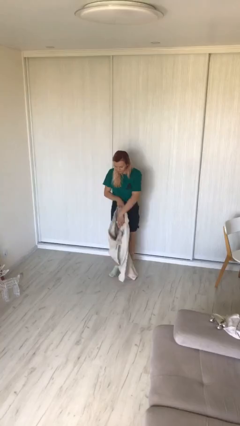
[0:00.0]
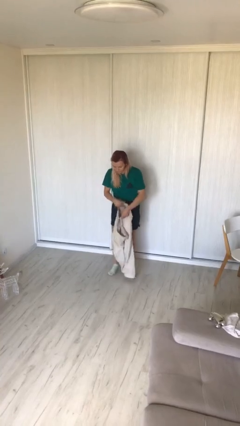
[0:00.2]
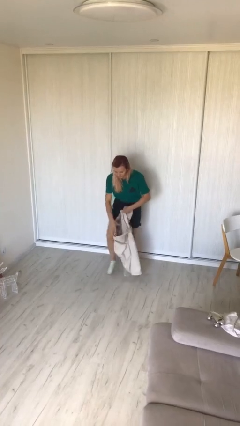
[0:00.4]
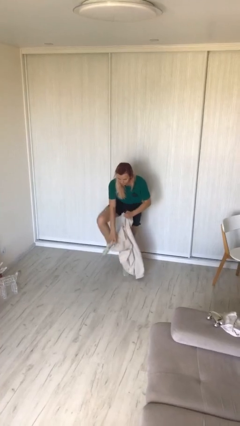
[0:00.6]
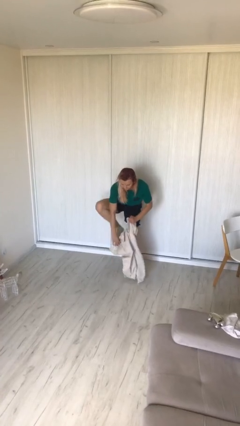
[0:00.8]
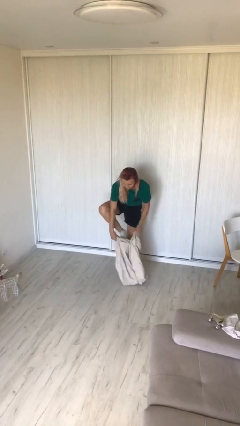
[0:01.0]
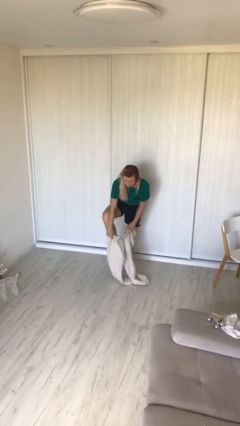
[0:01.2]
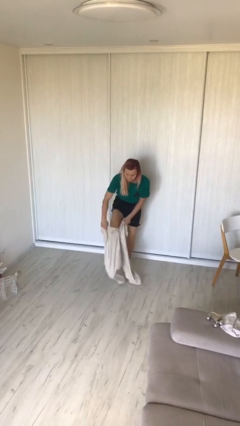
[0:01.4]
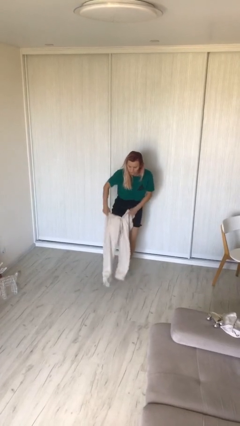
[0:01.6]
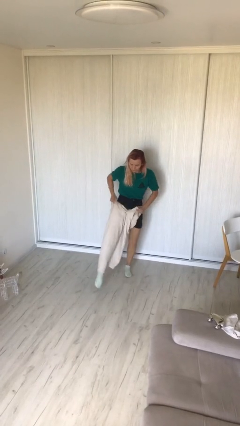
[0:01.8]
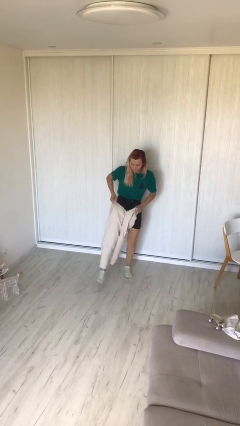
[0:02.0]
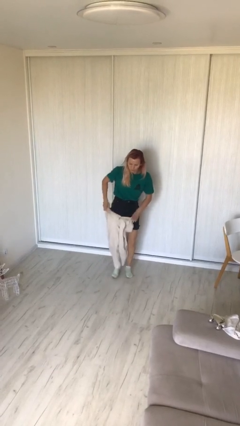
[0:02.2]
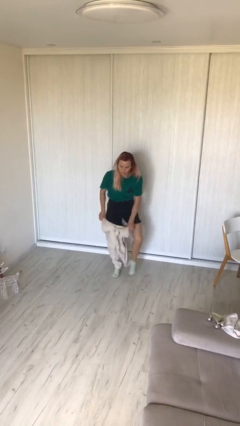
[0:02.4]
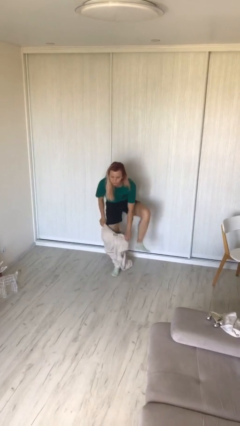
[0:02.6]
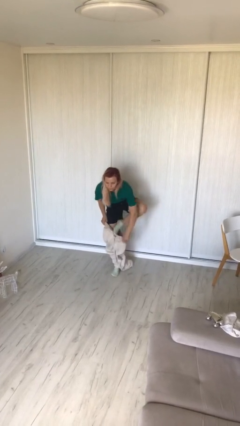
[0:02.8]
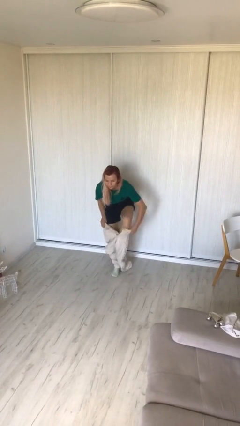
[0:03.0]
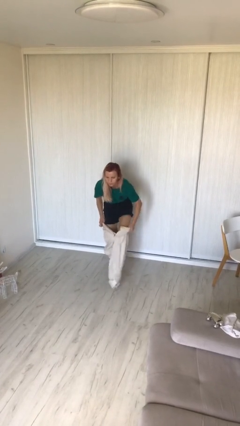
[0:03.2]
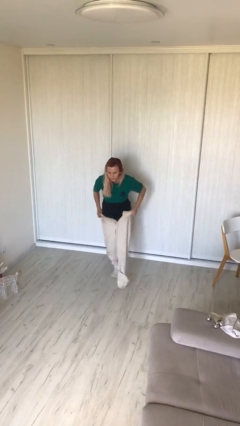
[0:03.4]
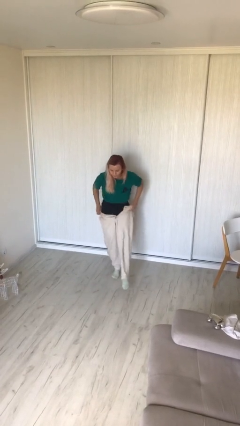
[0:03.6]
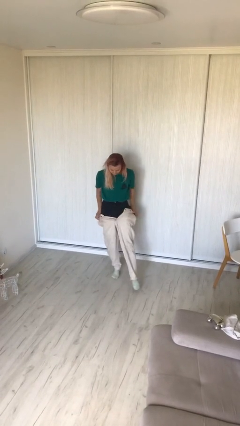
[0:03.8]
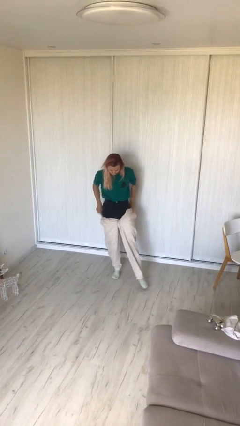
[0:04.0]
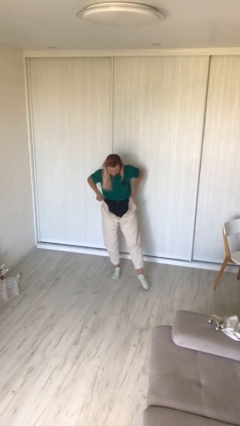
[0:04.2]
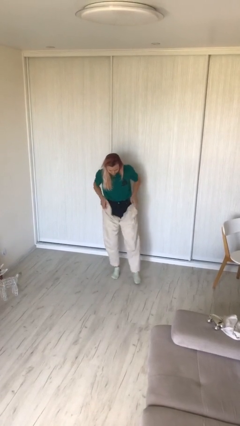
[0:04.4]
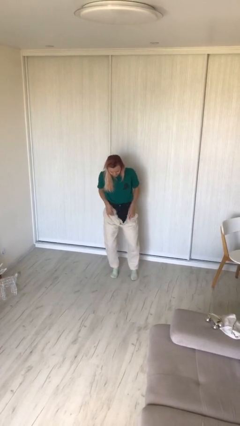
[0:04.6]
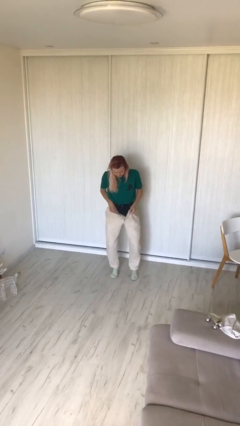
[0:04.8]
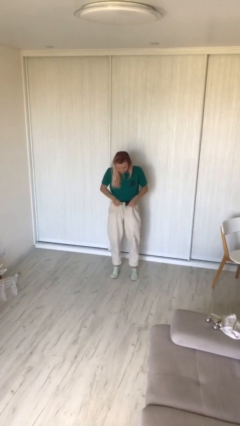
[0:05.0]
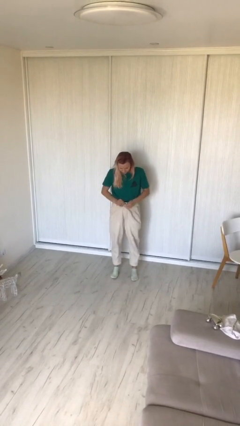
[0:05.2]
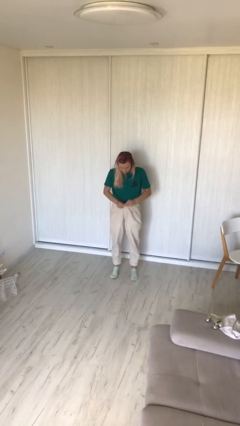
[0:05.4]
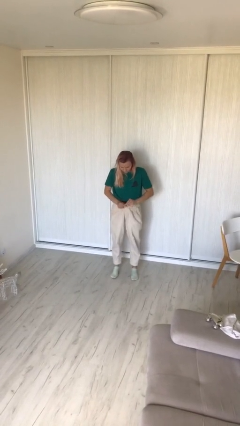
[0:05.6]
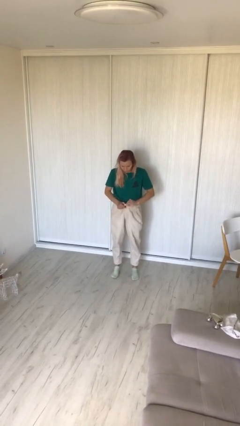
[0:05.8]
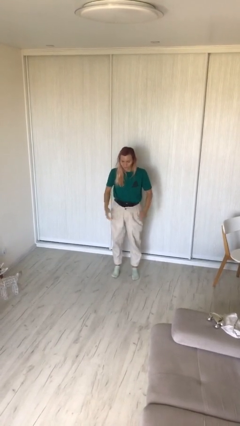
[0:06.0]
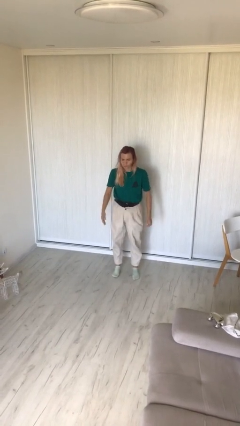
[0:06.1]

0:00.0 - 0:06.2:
person puts on pants

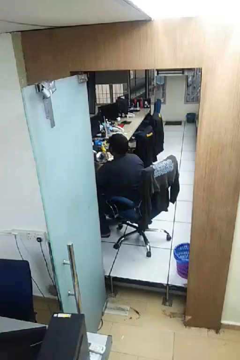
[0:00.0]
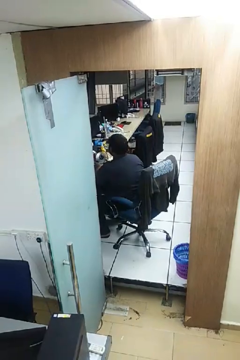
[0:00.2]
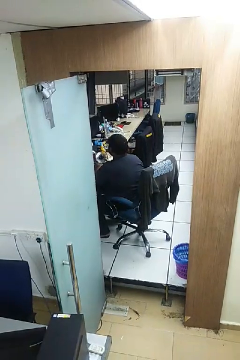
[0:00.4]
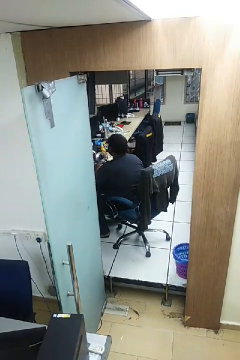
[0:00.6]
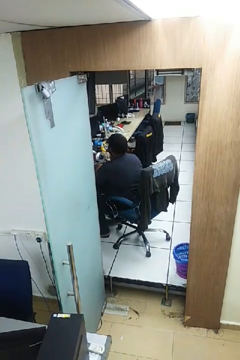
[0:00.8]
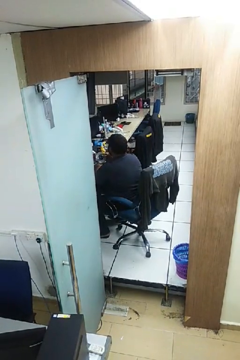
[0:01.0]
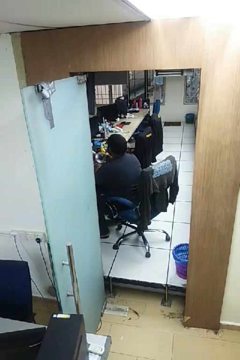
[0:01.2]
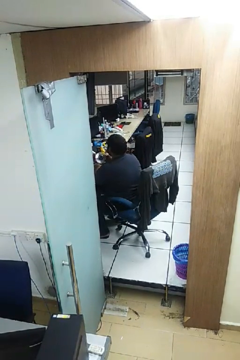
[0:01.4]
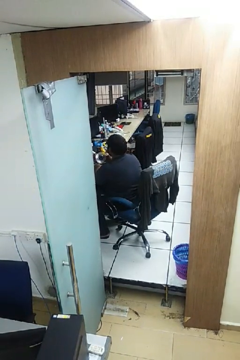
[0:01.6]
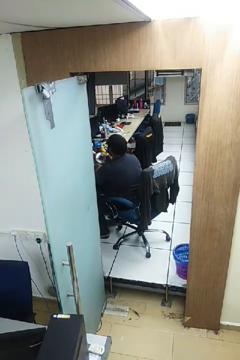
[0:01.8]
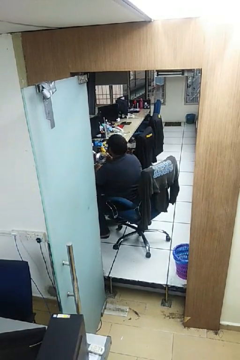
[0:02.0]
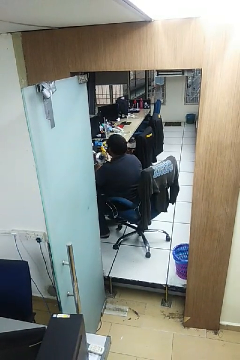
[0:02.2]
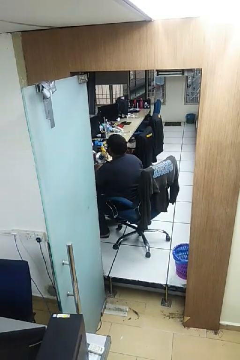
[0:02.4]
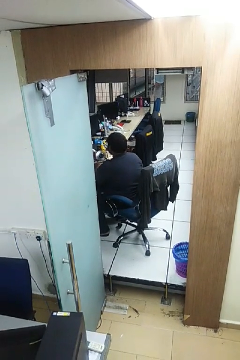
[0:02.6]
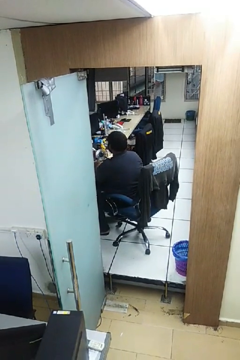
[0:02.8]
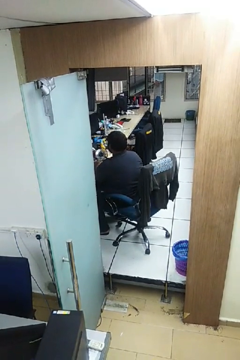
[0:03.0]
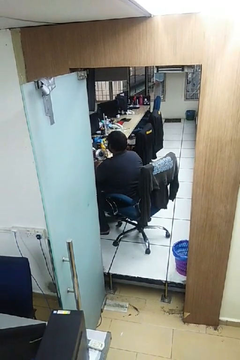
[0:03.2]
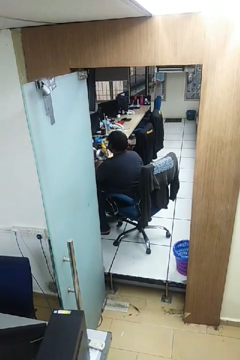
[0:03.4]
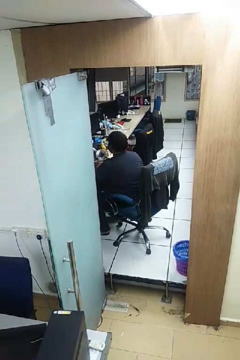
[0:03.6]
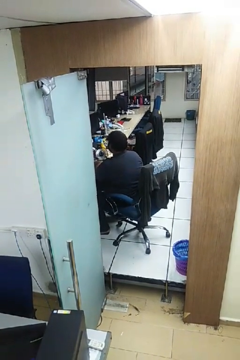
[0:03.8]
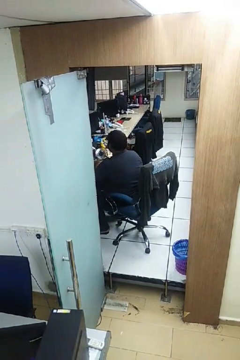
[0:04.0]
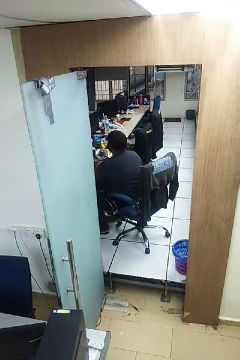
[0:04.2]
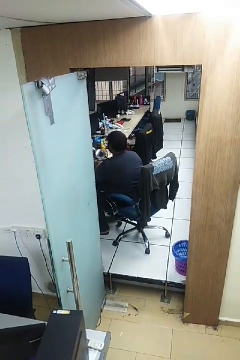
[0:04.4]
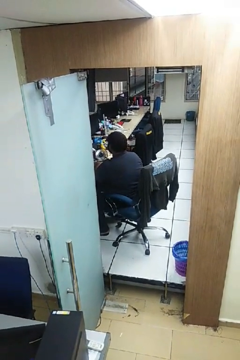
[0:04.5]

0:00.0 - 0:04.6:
person turns on fan

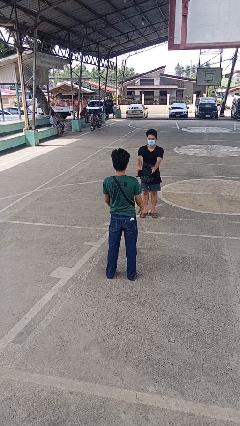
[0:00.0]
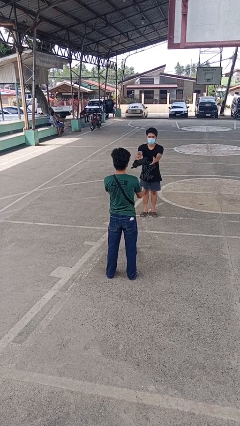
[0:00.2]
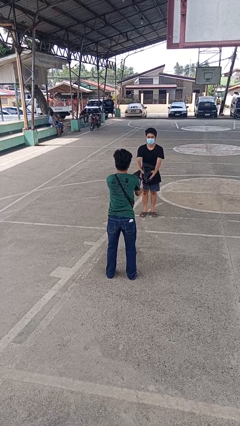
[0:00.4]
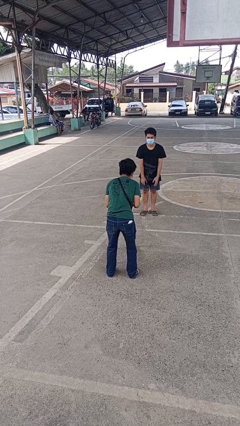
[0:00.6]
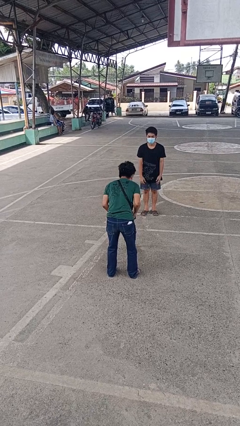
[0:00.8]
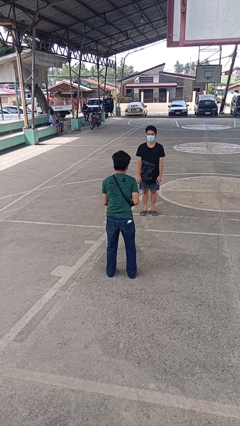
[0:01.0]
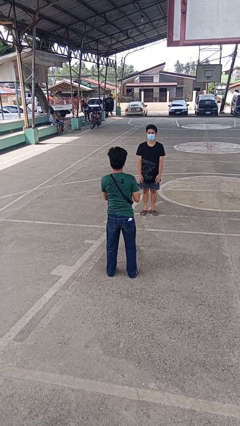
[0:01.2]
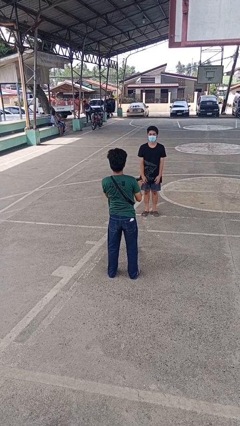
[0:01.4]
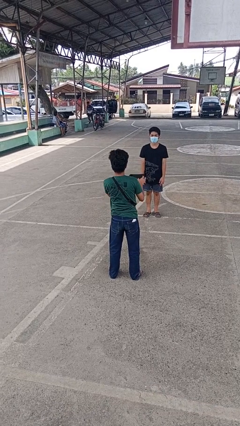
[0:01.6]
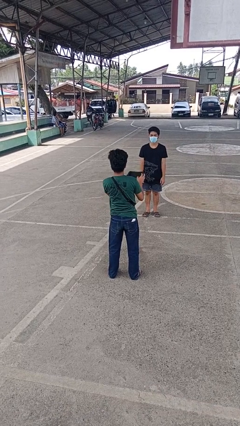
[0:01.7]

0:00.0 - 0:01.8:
person catches object from person

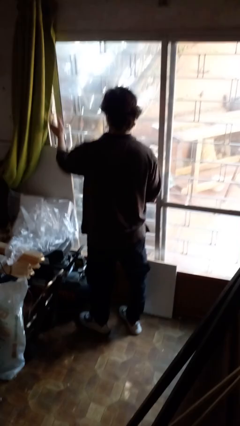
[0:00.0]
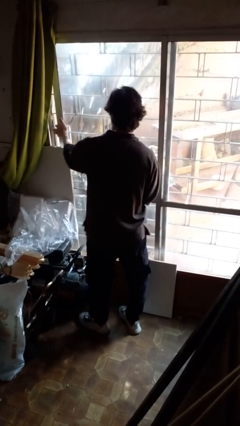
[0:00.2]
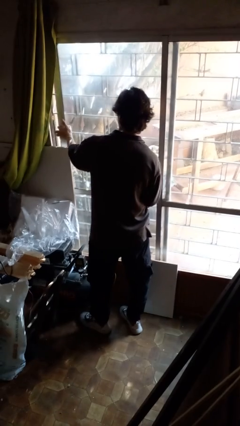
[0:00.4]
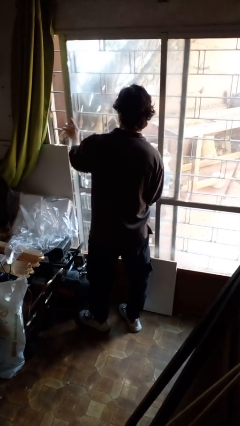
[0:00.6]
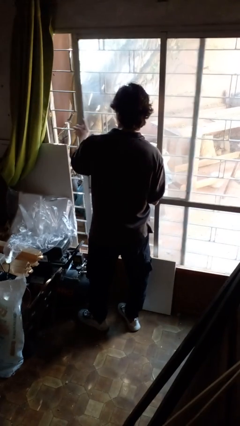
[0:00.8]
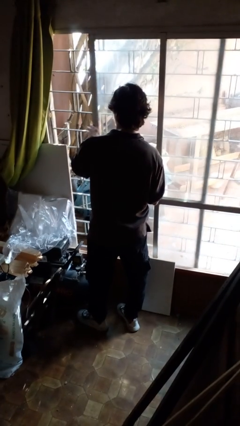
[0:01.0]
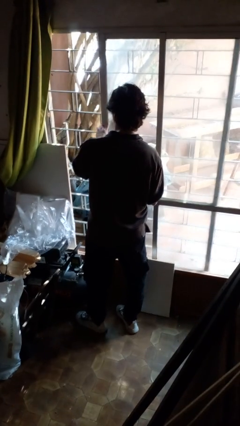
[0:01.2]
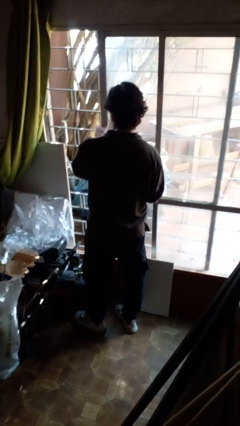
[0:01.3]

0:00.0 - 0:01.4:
person opens sliding door

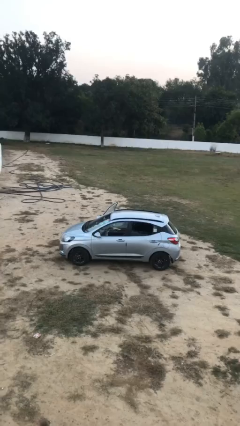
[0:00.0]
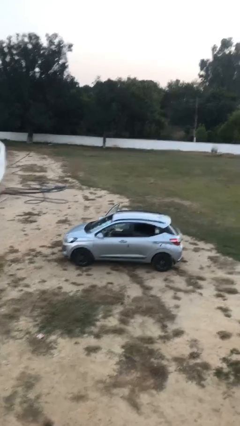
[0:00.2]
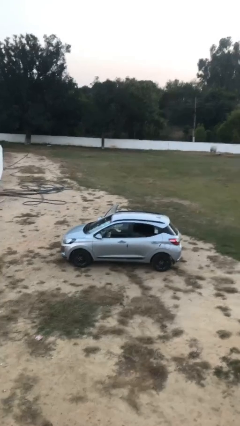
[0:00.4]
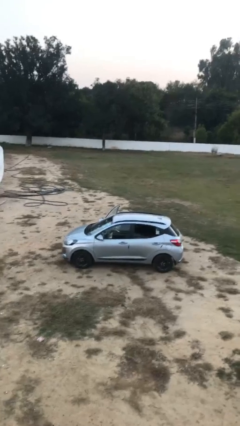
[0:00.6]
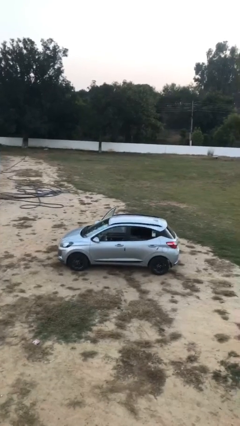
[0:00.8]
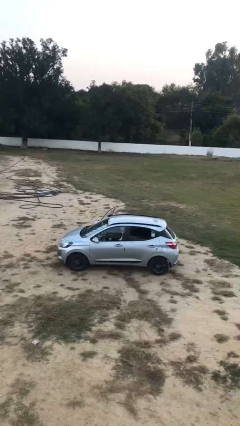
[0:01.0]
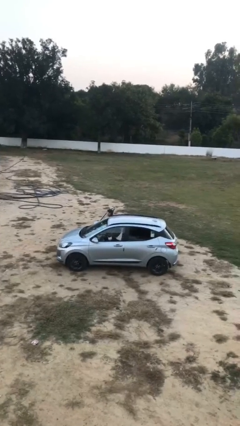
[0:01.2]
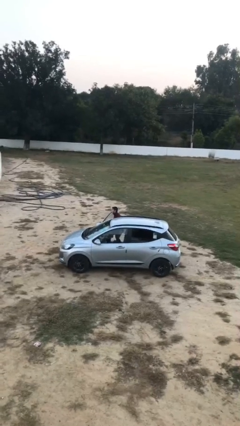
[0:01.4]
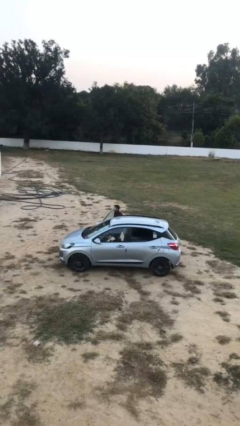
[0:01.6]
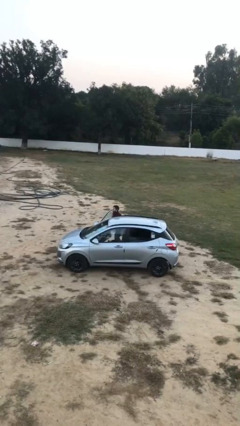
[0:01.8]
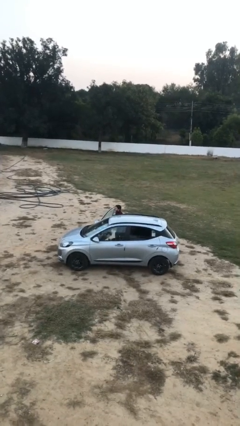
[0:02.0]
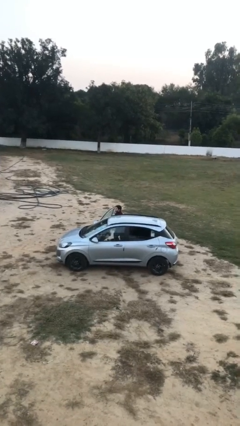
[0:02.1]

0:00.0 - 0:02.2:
person exits car

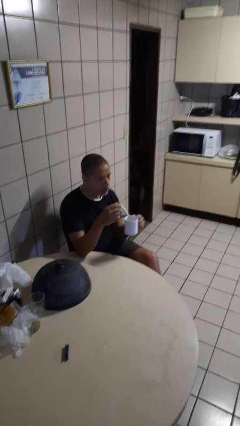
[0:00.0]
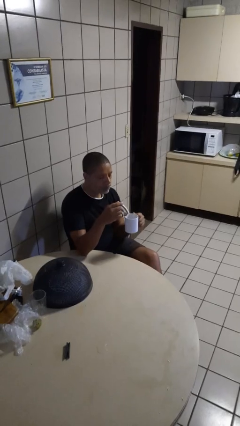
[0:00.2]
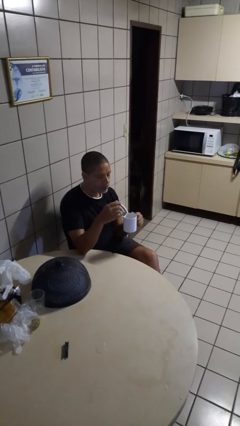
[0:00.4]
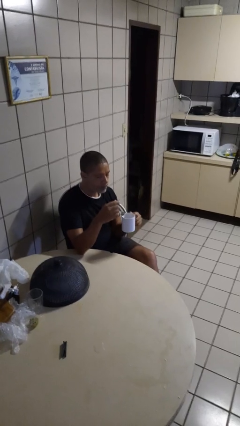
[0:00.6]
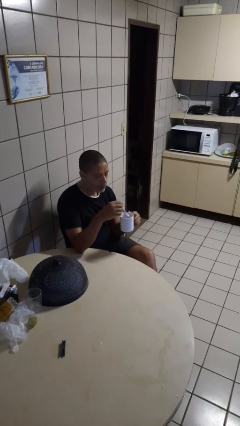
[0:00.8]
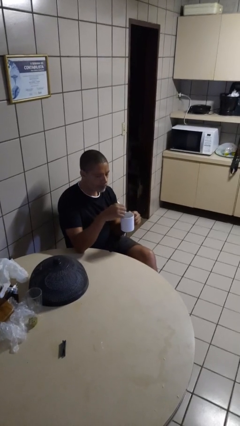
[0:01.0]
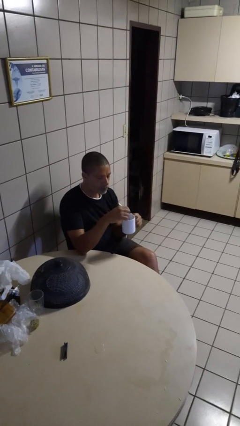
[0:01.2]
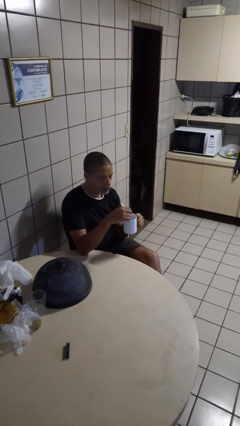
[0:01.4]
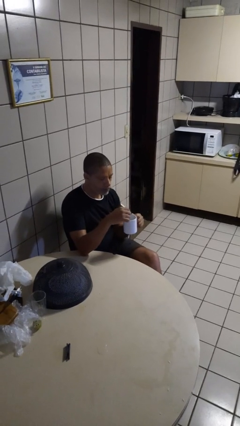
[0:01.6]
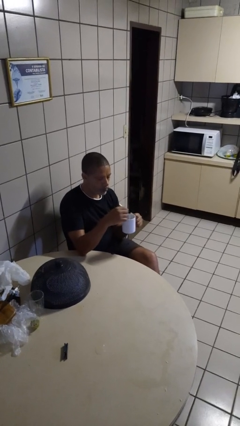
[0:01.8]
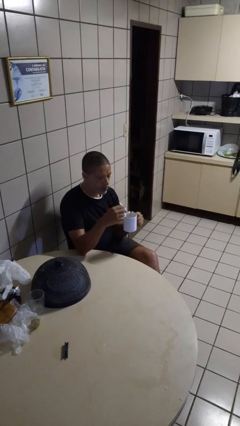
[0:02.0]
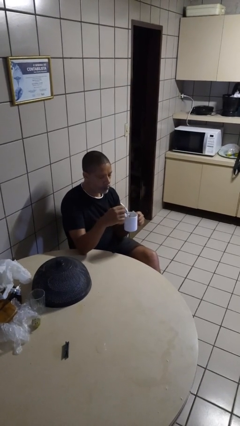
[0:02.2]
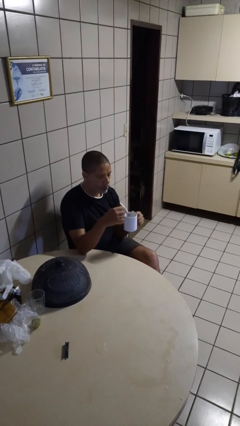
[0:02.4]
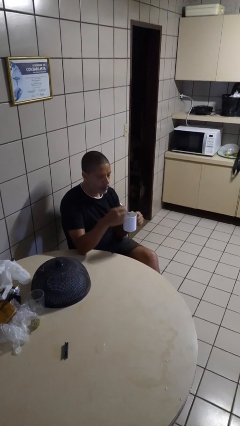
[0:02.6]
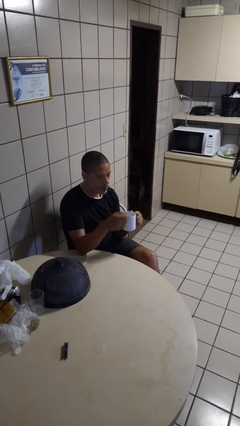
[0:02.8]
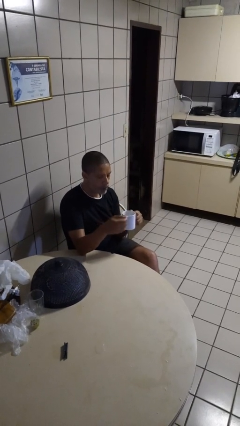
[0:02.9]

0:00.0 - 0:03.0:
person stirs mug
